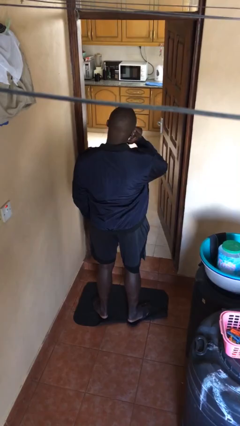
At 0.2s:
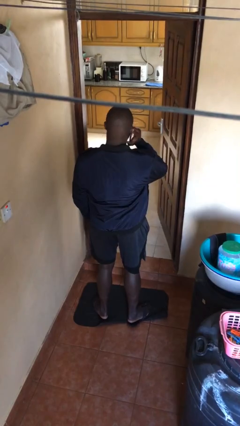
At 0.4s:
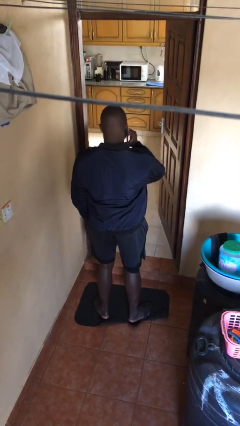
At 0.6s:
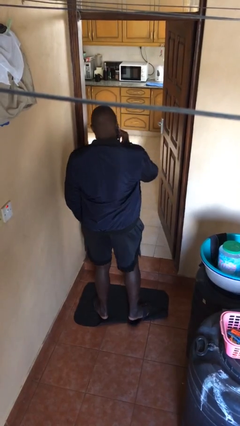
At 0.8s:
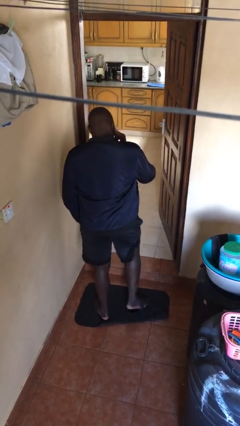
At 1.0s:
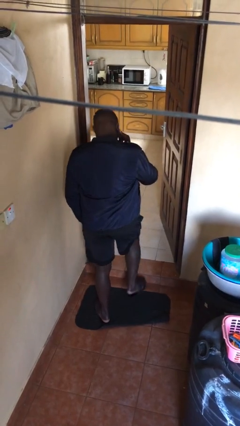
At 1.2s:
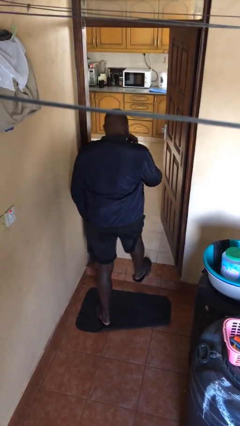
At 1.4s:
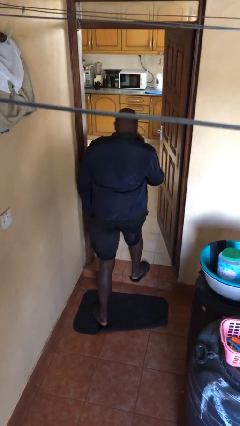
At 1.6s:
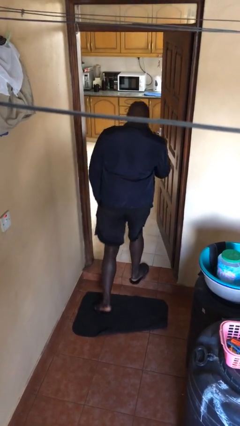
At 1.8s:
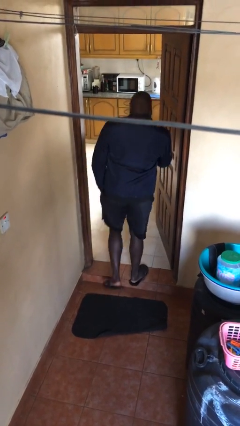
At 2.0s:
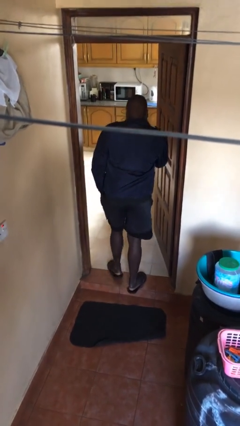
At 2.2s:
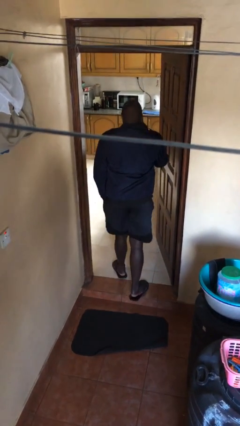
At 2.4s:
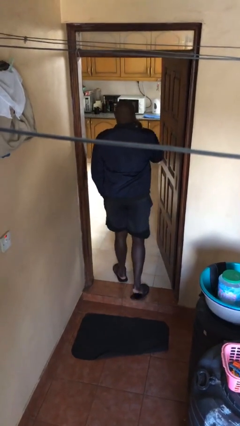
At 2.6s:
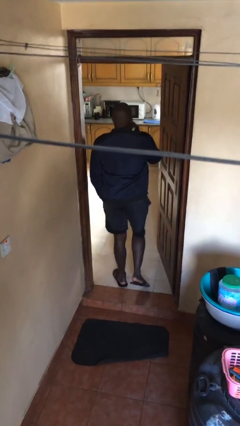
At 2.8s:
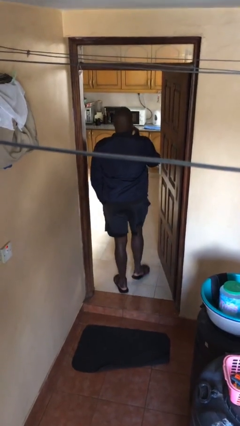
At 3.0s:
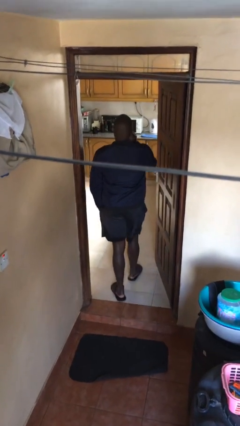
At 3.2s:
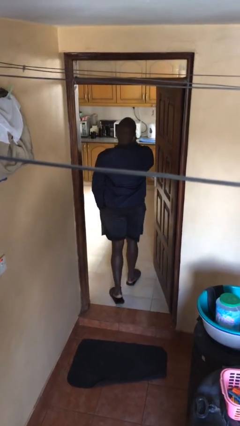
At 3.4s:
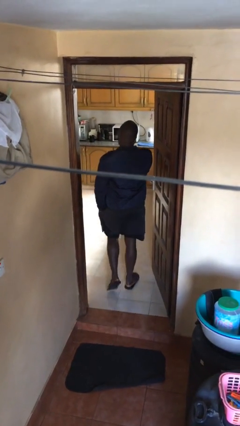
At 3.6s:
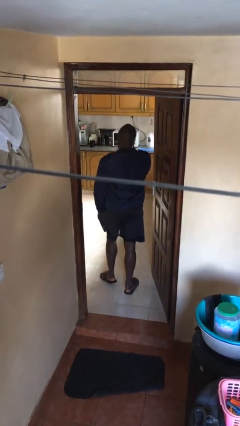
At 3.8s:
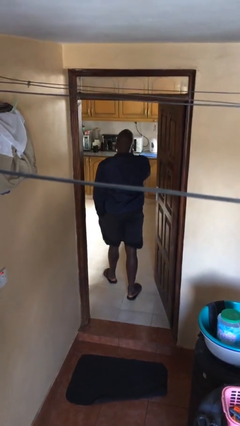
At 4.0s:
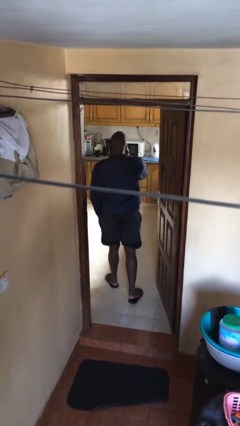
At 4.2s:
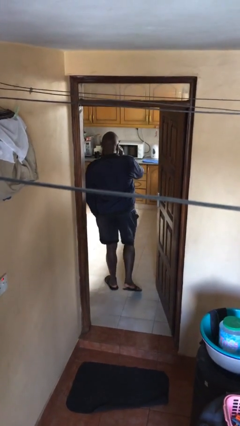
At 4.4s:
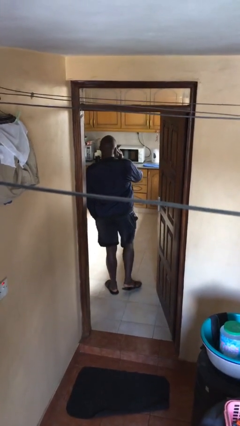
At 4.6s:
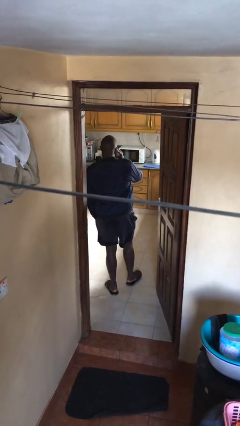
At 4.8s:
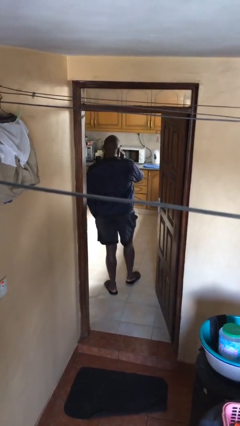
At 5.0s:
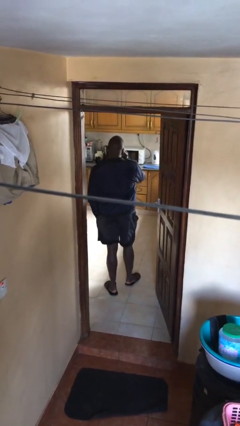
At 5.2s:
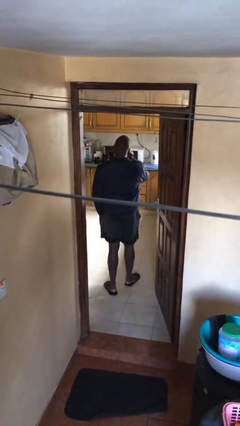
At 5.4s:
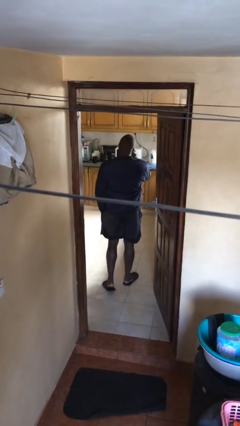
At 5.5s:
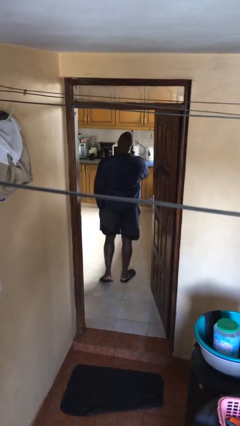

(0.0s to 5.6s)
person exits scene through structure

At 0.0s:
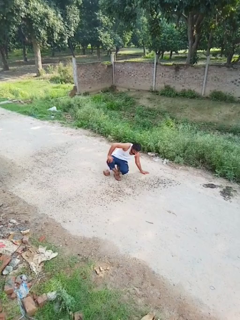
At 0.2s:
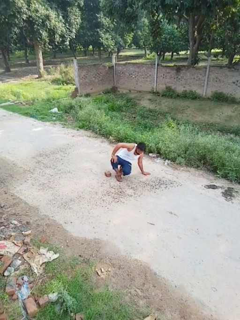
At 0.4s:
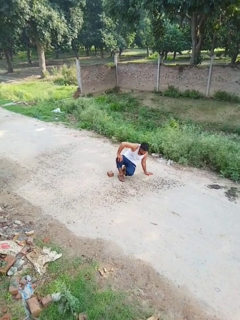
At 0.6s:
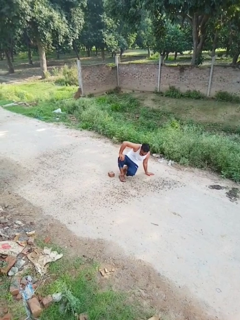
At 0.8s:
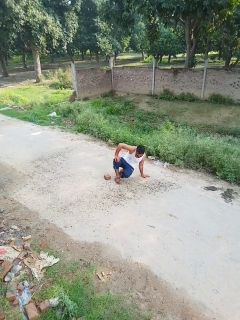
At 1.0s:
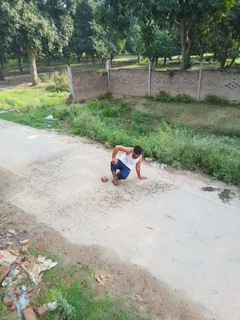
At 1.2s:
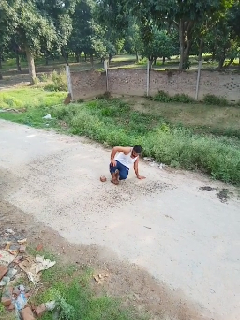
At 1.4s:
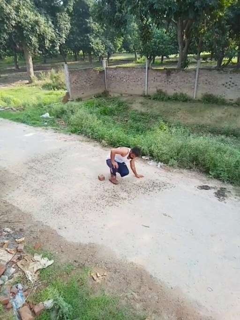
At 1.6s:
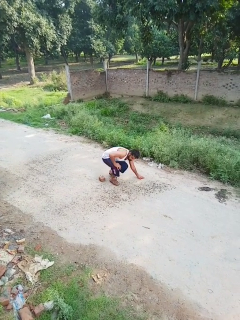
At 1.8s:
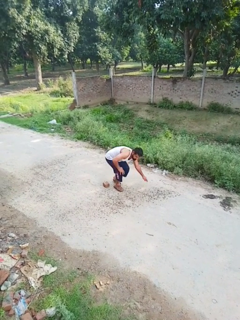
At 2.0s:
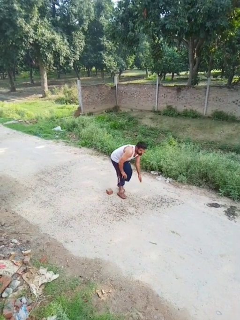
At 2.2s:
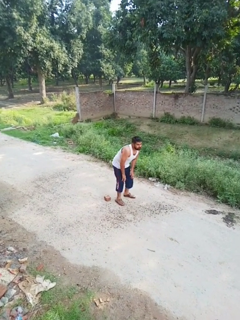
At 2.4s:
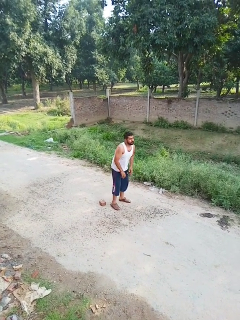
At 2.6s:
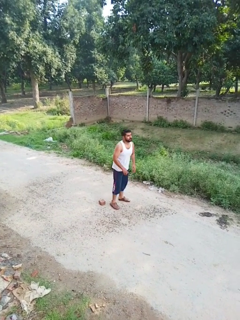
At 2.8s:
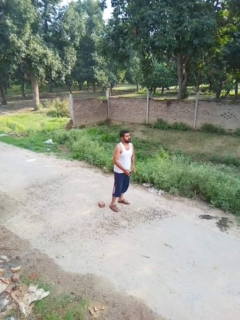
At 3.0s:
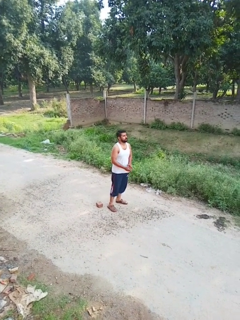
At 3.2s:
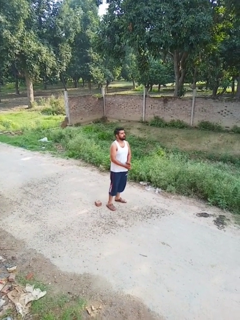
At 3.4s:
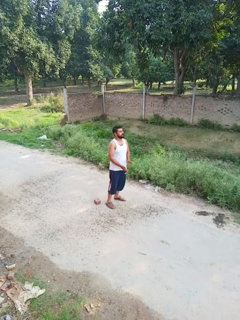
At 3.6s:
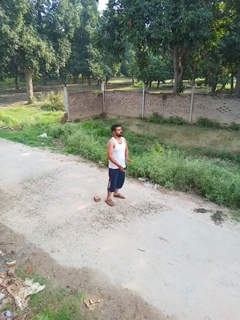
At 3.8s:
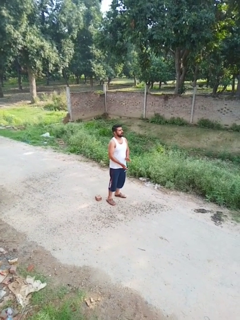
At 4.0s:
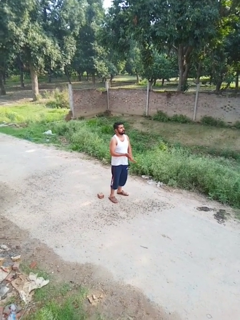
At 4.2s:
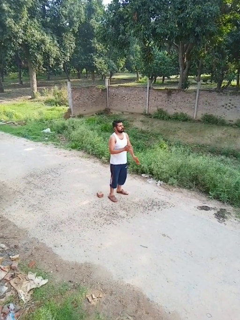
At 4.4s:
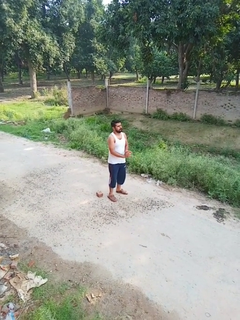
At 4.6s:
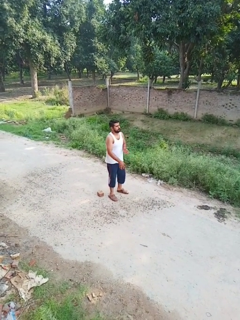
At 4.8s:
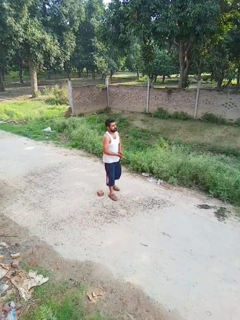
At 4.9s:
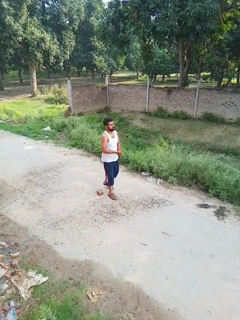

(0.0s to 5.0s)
person stands up from floor

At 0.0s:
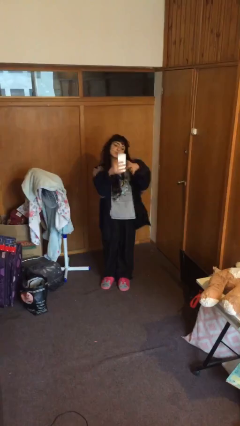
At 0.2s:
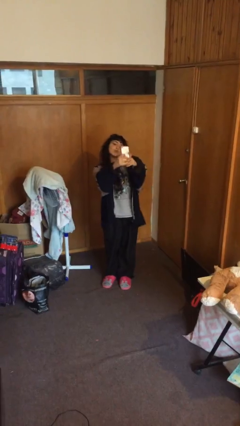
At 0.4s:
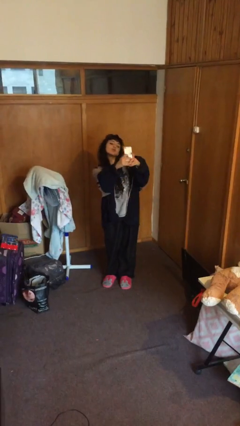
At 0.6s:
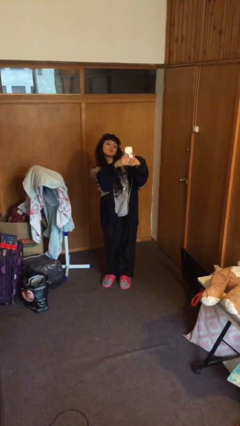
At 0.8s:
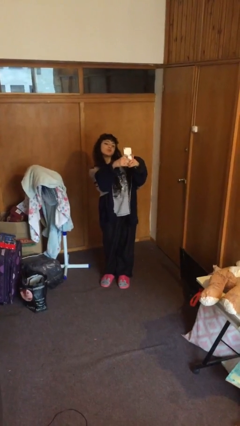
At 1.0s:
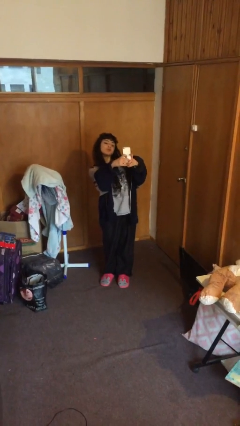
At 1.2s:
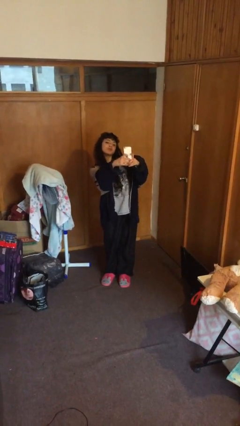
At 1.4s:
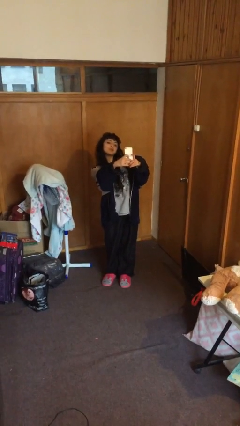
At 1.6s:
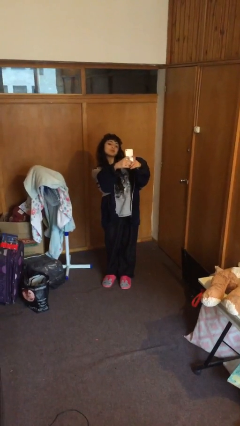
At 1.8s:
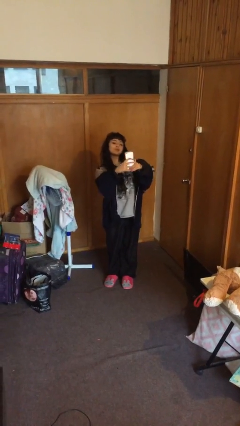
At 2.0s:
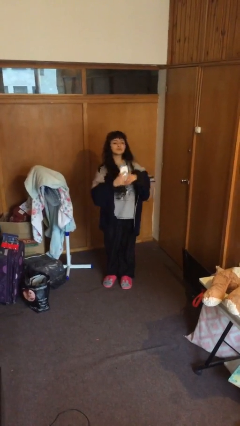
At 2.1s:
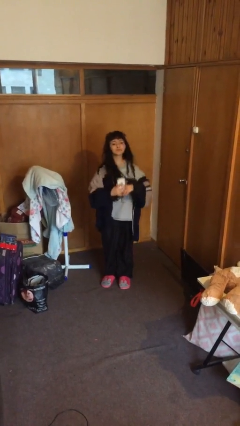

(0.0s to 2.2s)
person takes selfie

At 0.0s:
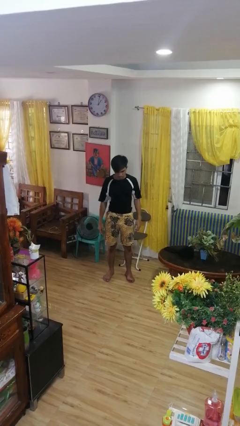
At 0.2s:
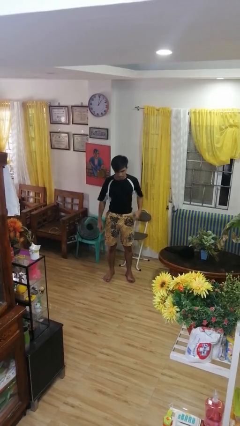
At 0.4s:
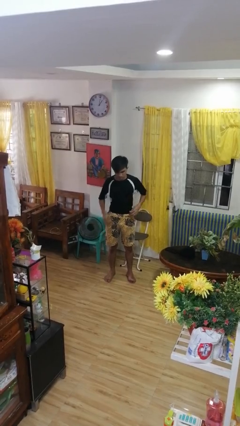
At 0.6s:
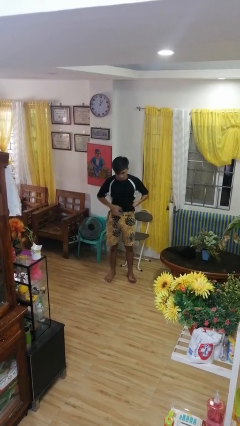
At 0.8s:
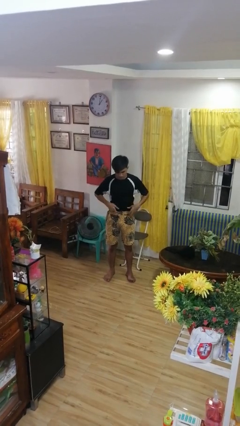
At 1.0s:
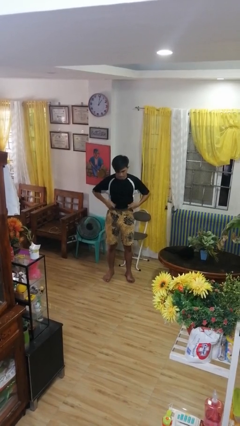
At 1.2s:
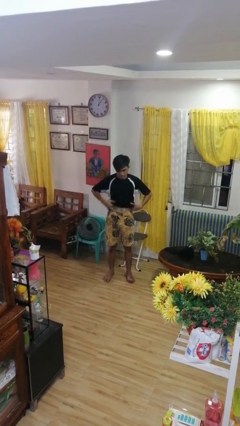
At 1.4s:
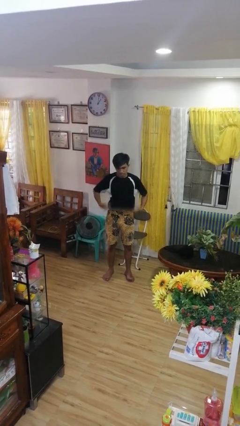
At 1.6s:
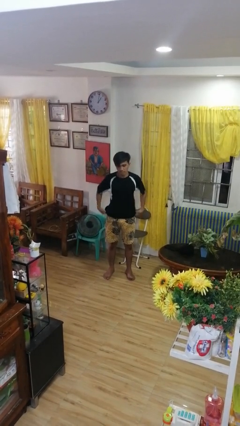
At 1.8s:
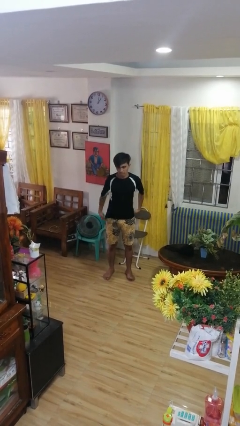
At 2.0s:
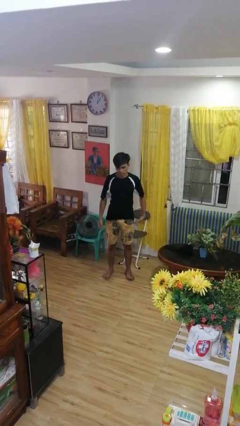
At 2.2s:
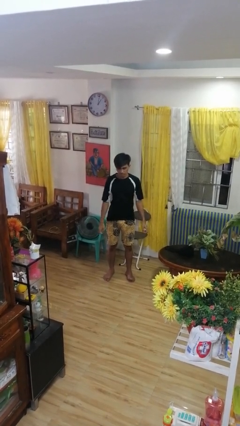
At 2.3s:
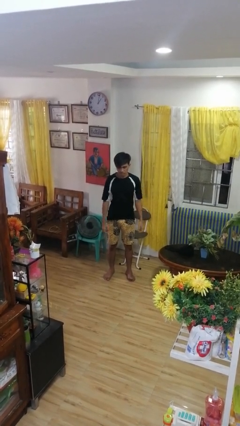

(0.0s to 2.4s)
person untucks shirt

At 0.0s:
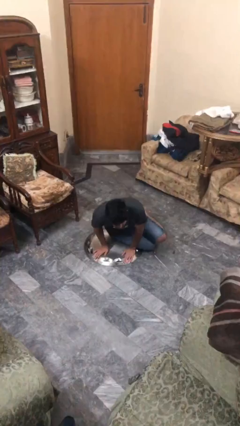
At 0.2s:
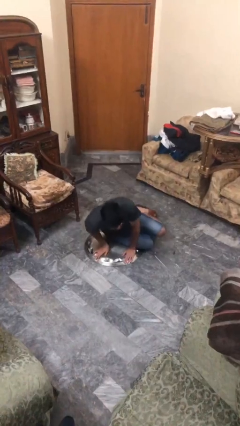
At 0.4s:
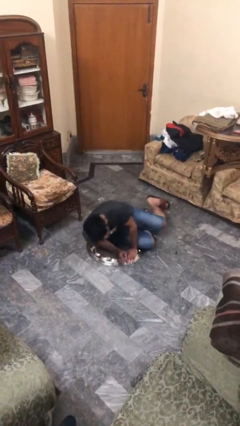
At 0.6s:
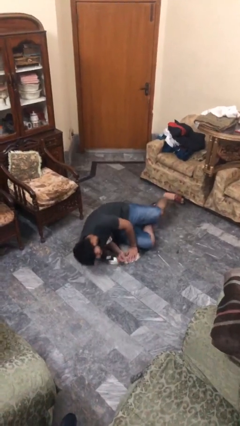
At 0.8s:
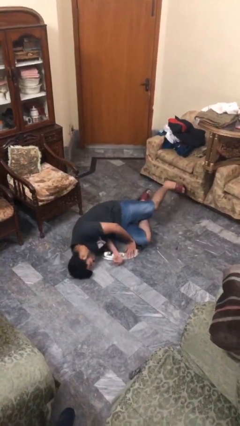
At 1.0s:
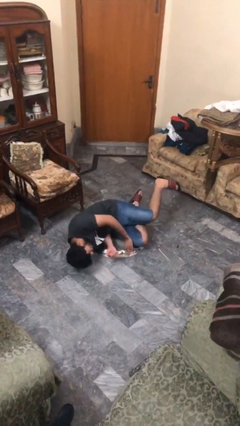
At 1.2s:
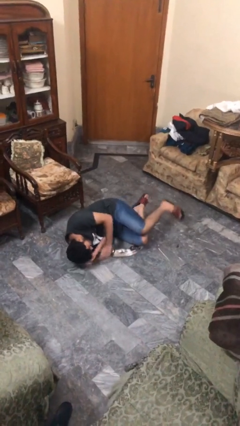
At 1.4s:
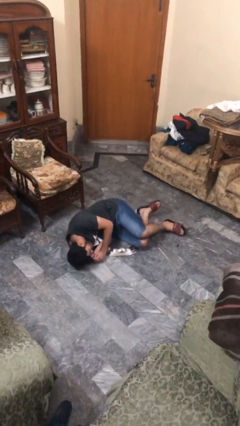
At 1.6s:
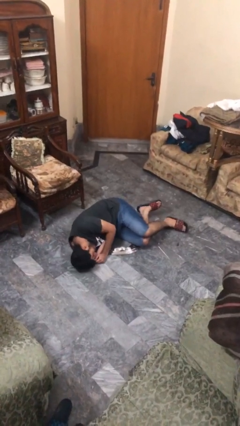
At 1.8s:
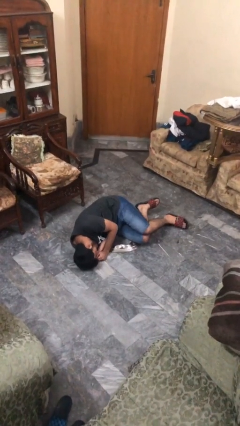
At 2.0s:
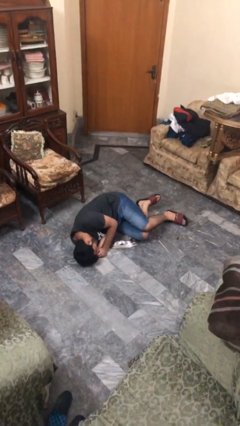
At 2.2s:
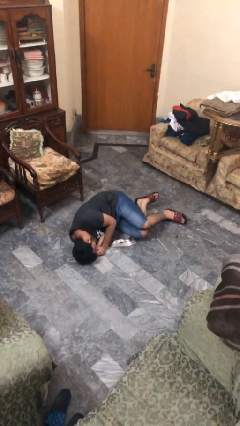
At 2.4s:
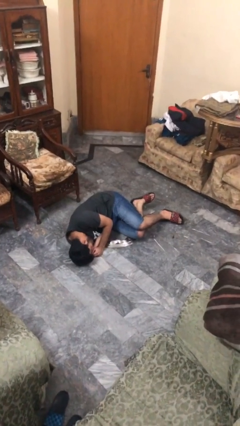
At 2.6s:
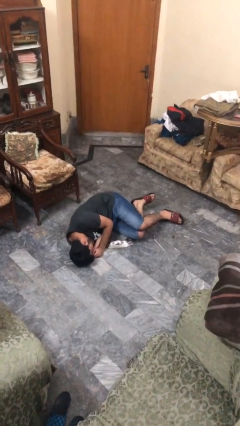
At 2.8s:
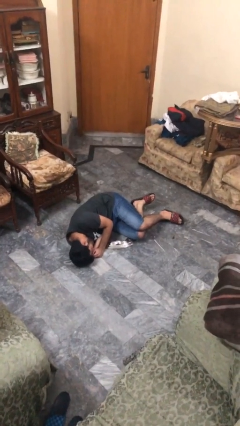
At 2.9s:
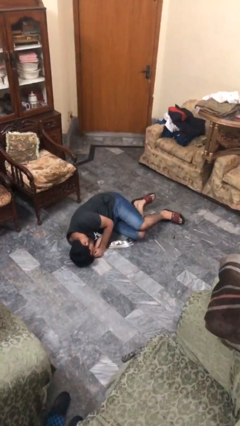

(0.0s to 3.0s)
person lies down on floor

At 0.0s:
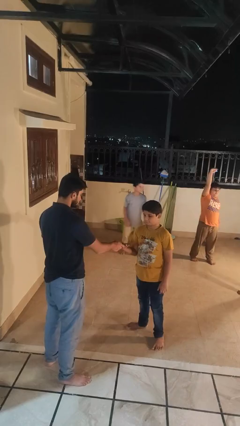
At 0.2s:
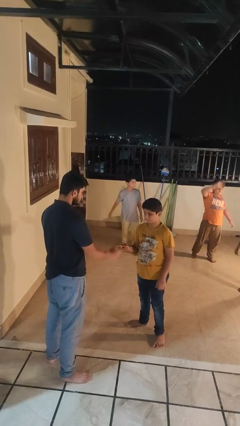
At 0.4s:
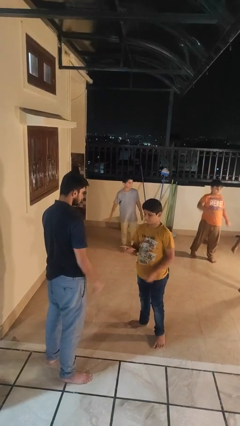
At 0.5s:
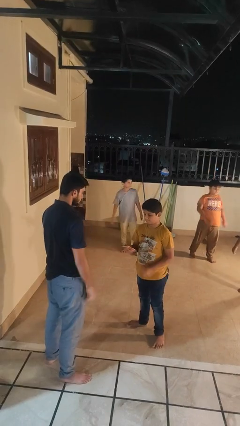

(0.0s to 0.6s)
person transfers object to person
